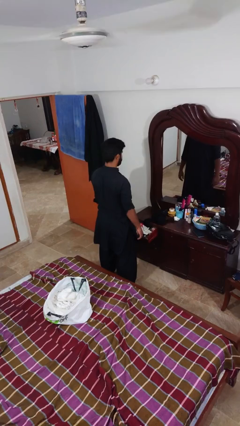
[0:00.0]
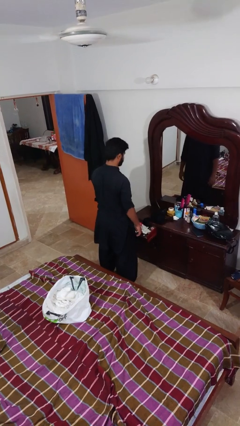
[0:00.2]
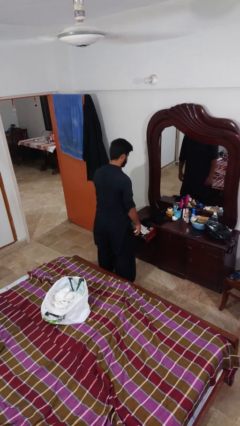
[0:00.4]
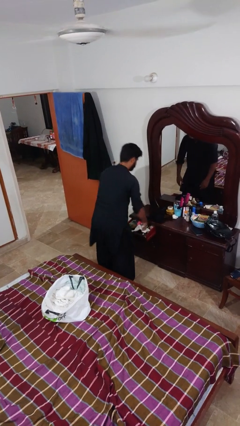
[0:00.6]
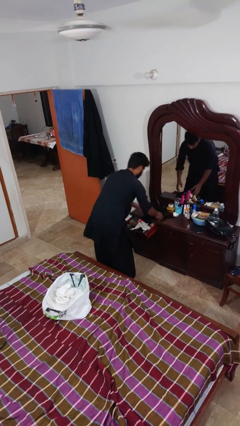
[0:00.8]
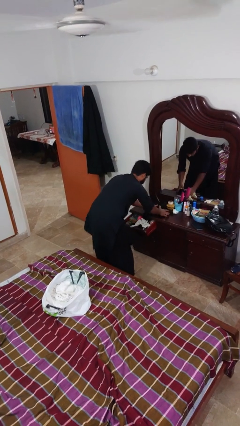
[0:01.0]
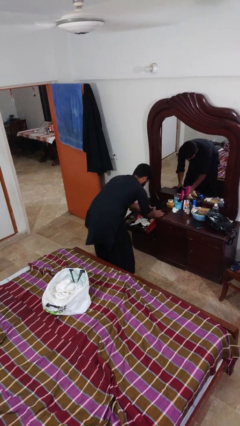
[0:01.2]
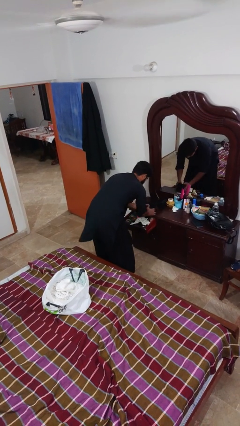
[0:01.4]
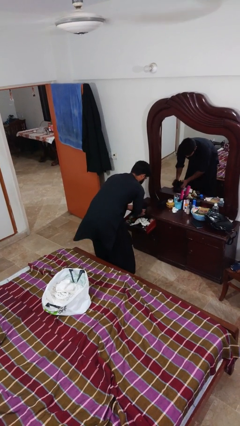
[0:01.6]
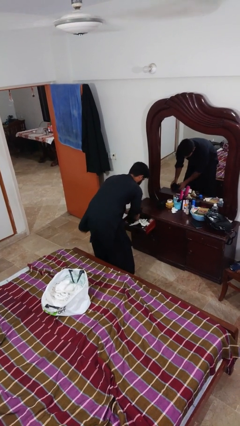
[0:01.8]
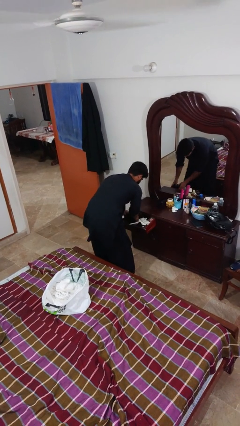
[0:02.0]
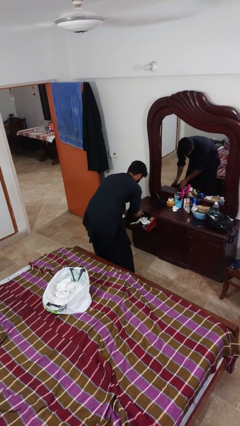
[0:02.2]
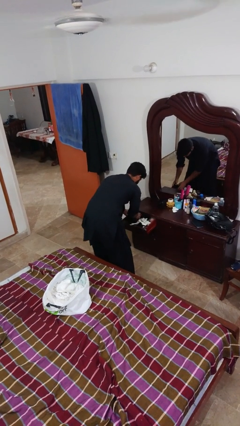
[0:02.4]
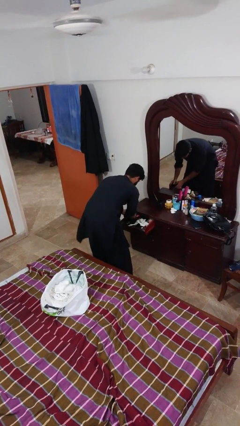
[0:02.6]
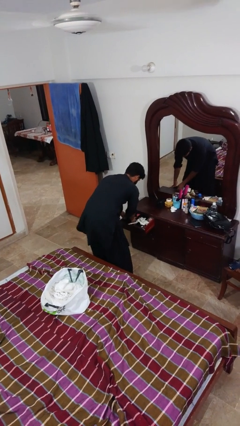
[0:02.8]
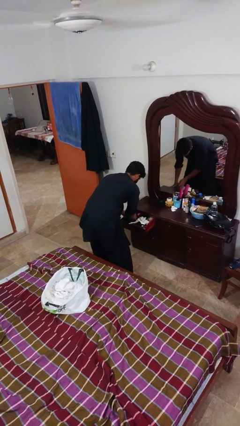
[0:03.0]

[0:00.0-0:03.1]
person puts clothes into dresser

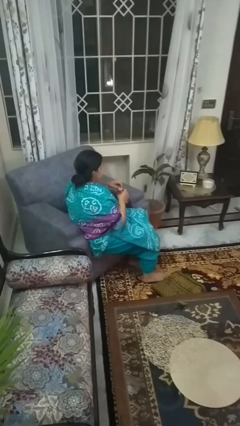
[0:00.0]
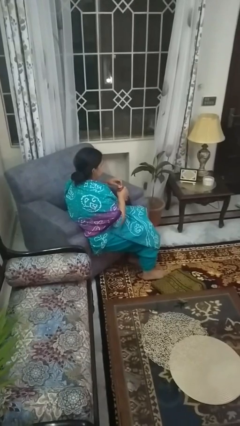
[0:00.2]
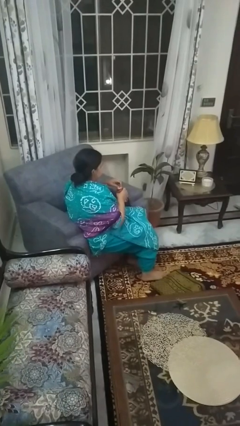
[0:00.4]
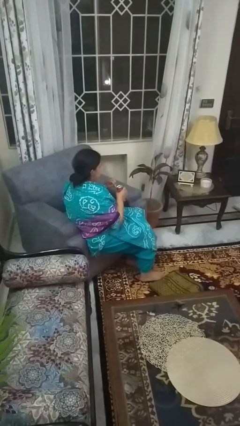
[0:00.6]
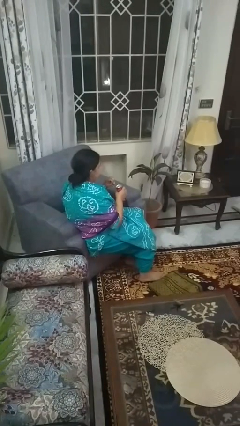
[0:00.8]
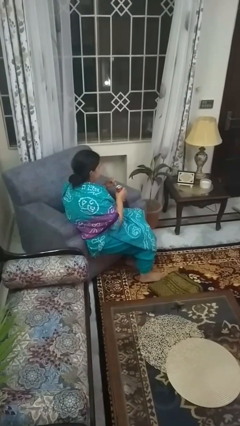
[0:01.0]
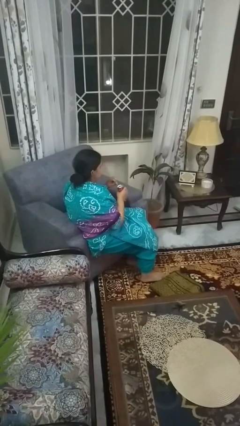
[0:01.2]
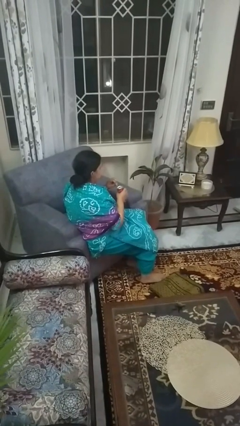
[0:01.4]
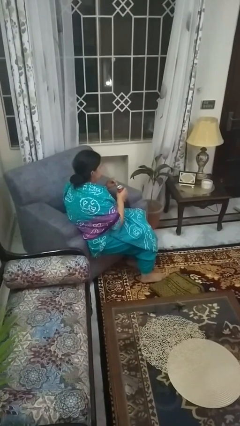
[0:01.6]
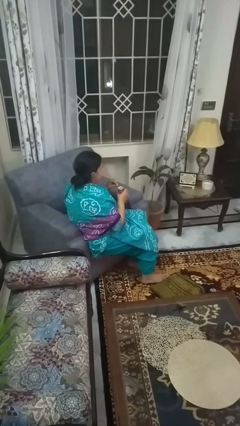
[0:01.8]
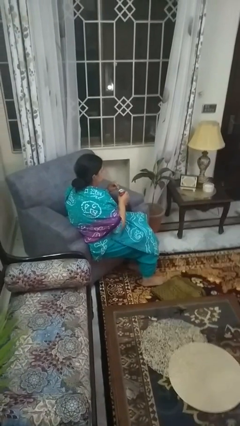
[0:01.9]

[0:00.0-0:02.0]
person opens beverage can

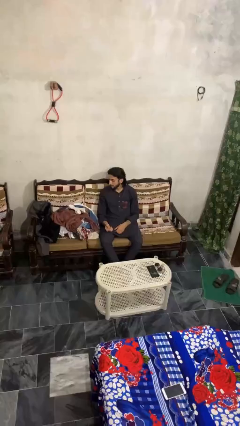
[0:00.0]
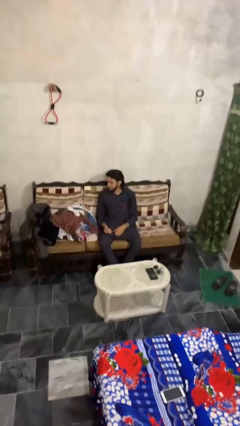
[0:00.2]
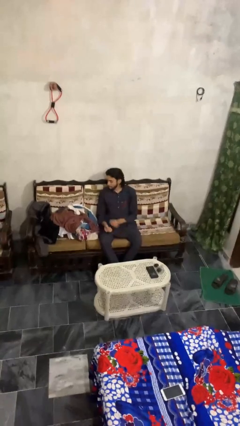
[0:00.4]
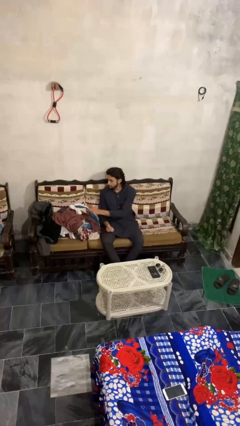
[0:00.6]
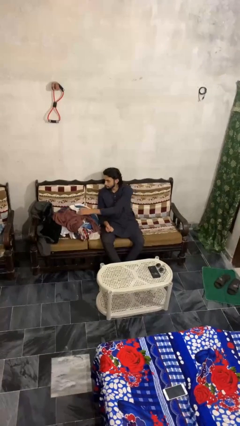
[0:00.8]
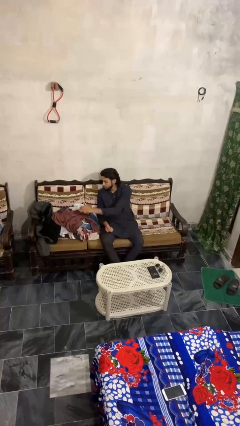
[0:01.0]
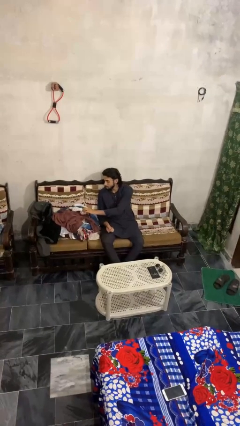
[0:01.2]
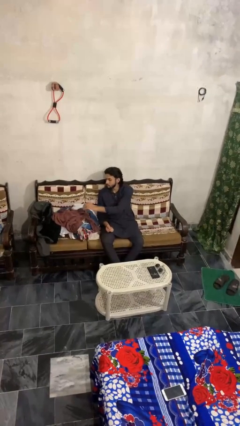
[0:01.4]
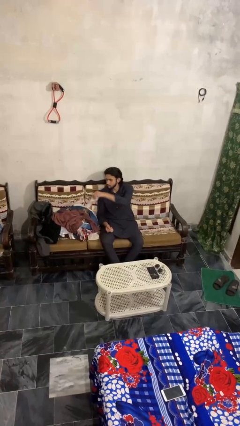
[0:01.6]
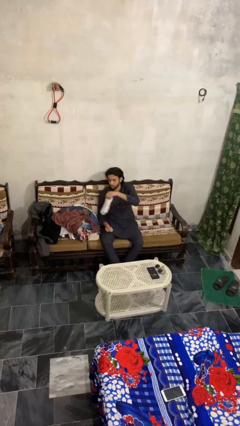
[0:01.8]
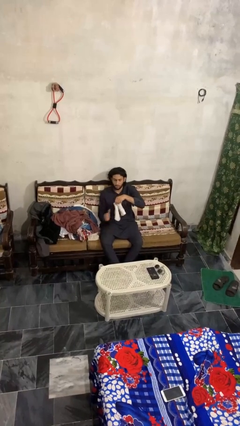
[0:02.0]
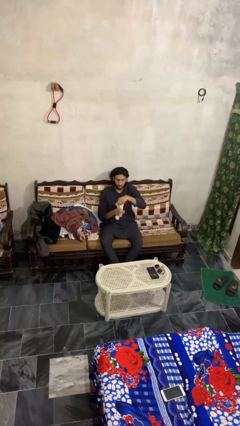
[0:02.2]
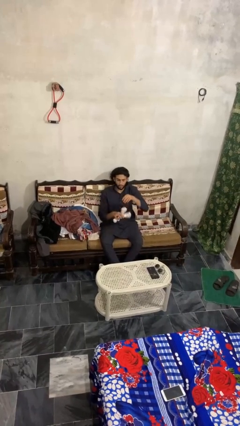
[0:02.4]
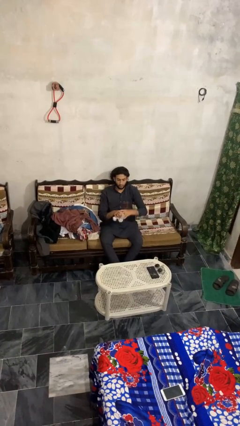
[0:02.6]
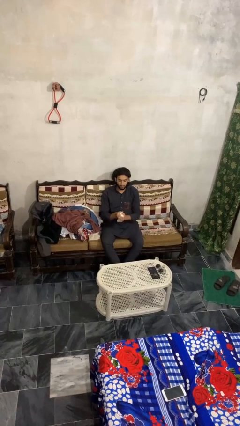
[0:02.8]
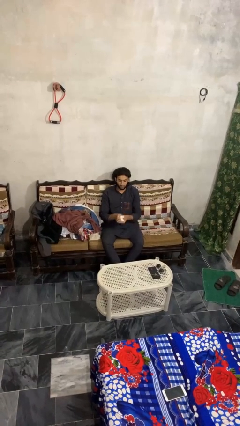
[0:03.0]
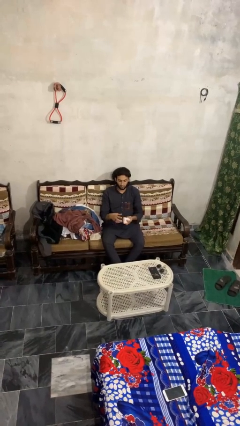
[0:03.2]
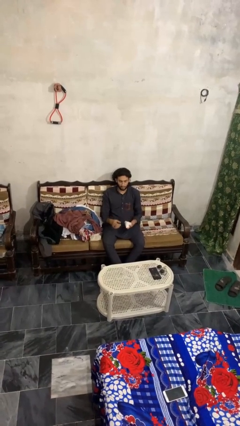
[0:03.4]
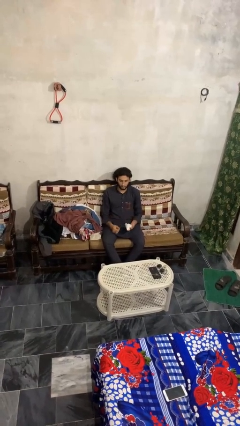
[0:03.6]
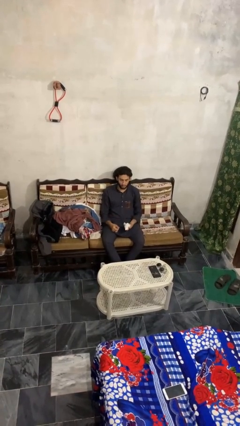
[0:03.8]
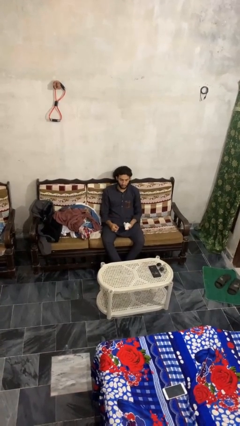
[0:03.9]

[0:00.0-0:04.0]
person folds socks

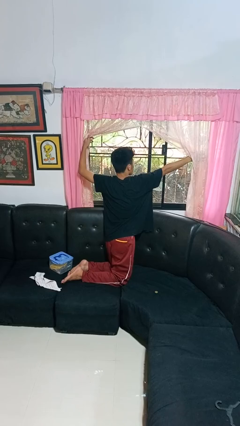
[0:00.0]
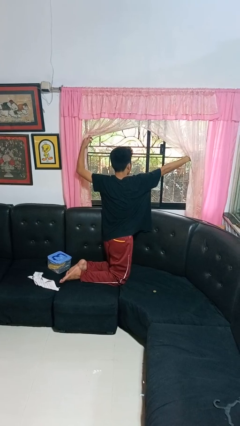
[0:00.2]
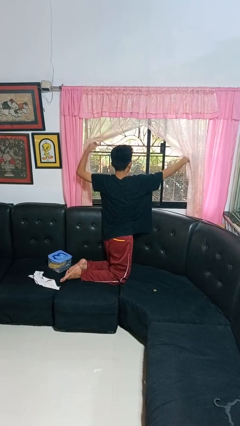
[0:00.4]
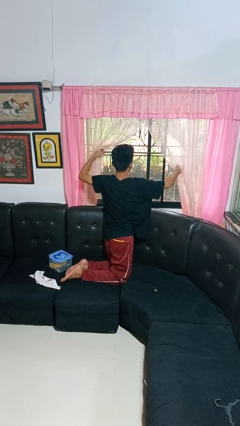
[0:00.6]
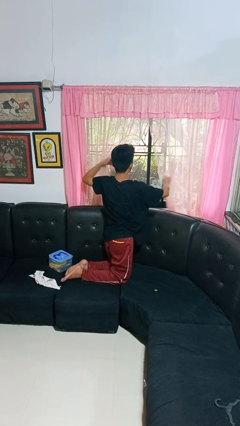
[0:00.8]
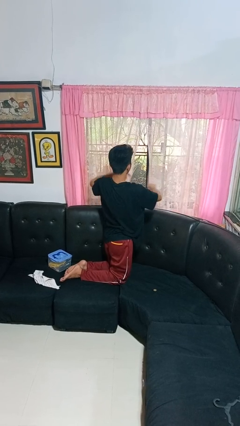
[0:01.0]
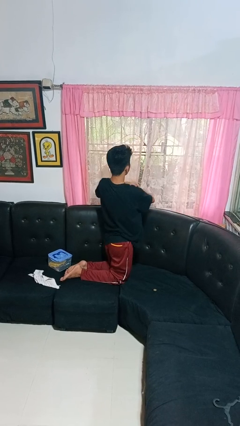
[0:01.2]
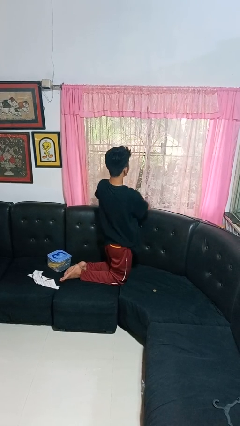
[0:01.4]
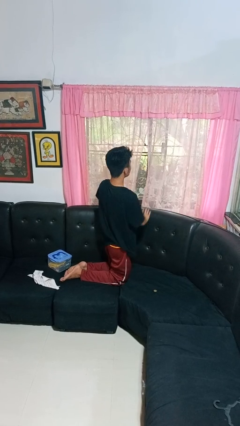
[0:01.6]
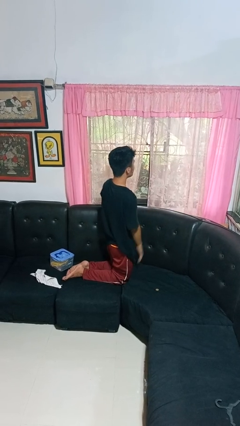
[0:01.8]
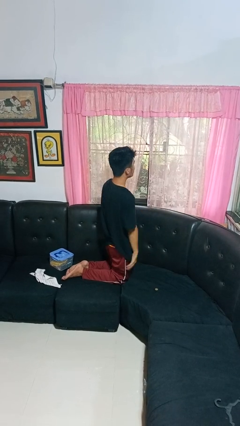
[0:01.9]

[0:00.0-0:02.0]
person closes curtains

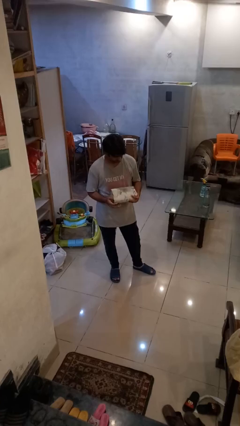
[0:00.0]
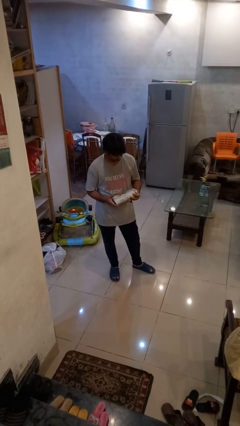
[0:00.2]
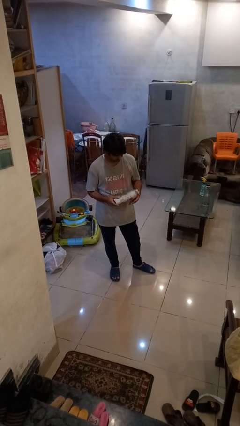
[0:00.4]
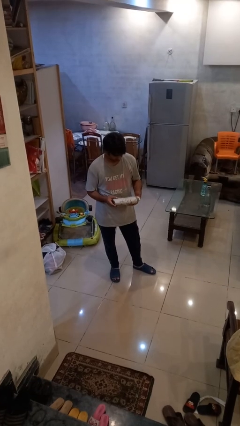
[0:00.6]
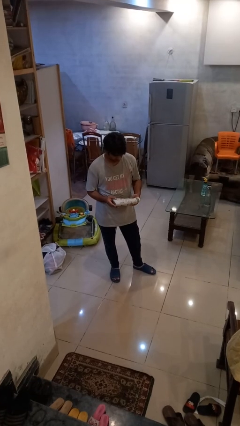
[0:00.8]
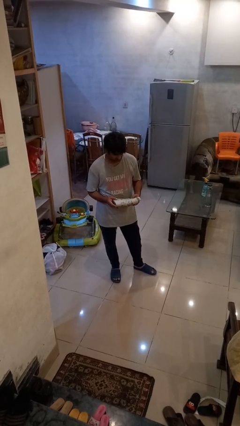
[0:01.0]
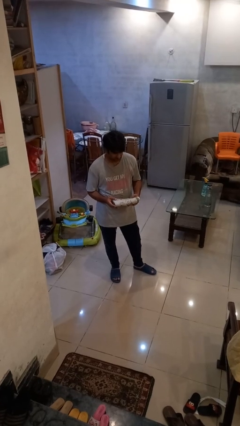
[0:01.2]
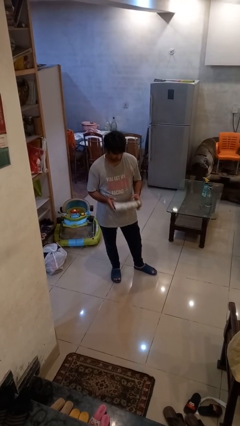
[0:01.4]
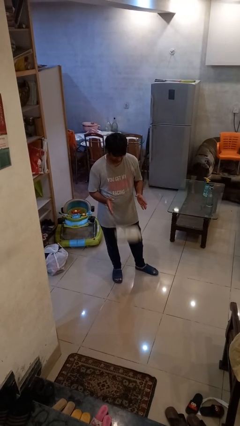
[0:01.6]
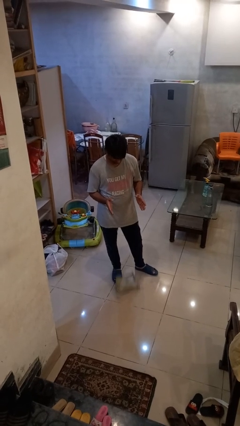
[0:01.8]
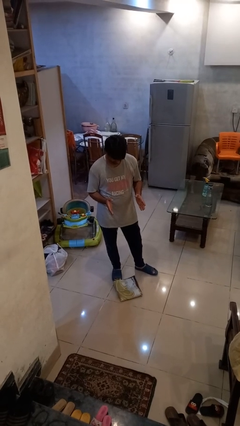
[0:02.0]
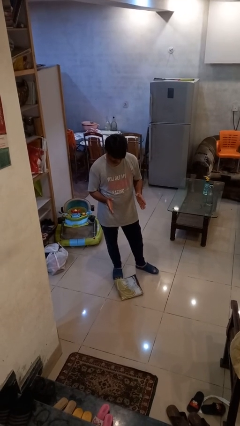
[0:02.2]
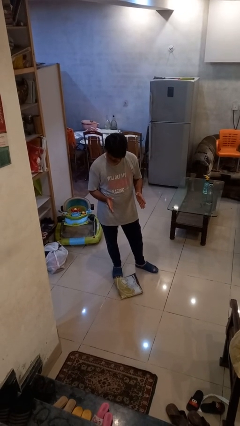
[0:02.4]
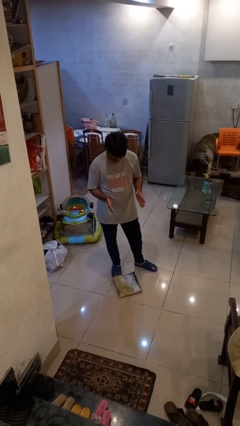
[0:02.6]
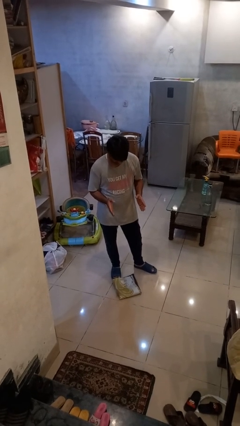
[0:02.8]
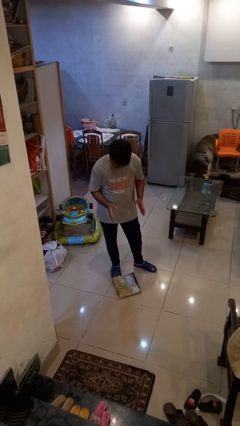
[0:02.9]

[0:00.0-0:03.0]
person drops object

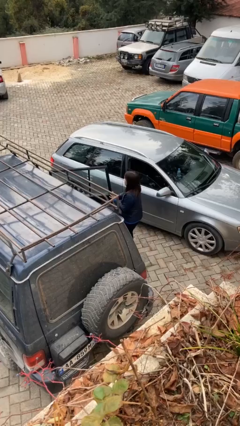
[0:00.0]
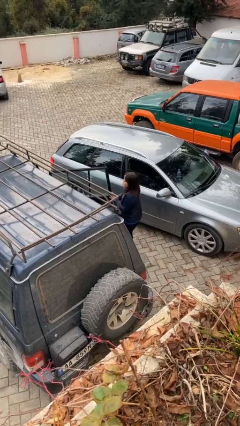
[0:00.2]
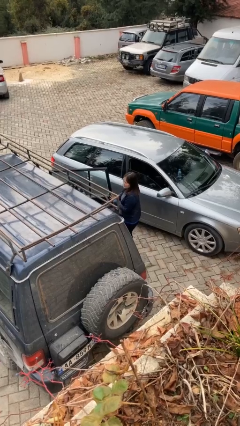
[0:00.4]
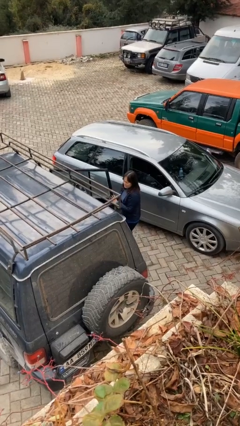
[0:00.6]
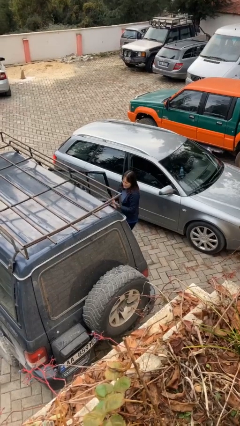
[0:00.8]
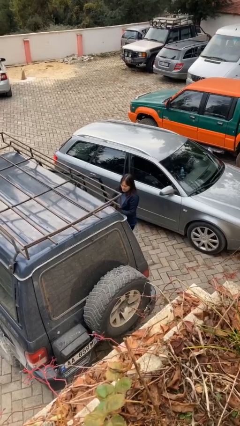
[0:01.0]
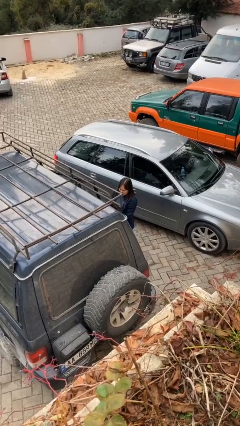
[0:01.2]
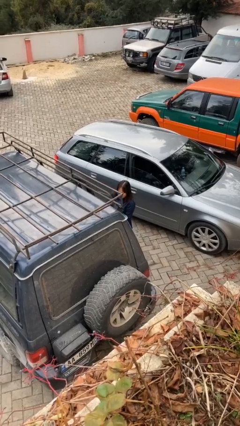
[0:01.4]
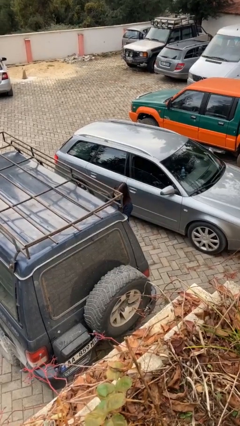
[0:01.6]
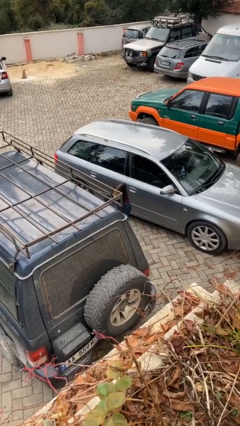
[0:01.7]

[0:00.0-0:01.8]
person closes car door

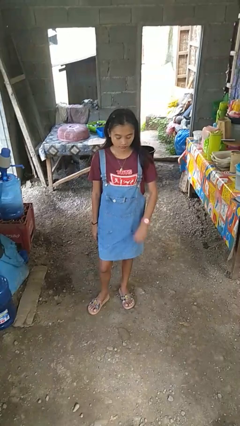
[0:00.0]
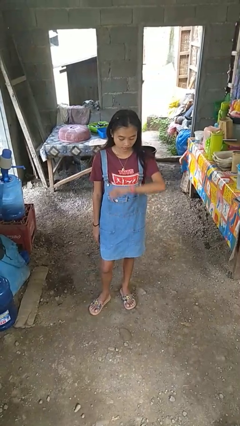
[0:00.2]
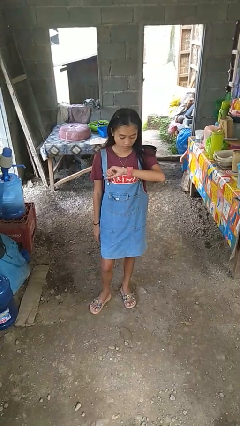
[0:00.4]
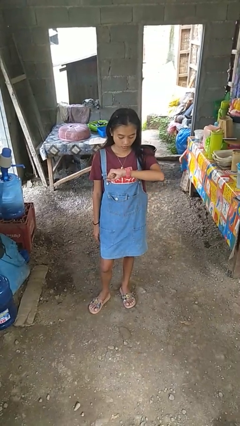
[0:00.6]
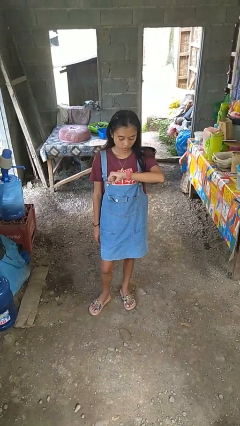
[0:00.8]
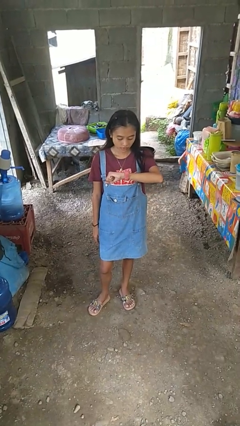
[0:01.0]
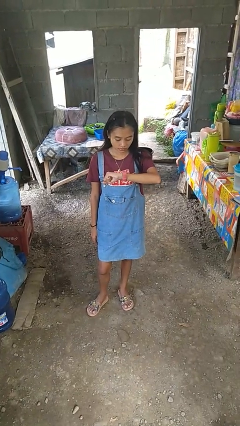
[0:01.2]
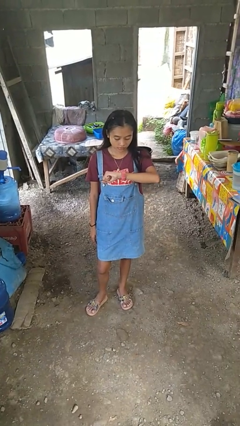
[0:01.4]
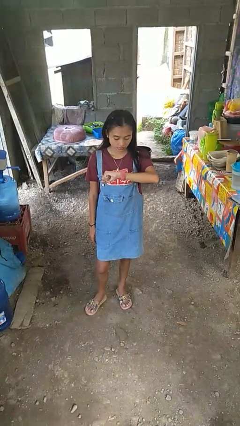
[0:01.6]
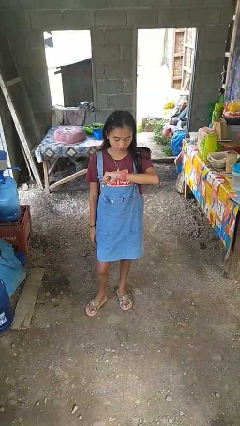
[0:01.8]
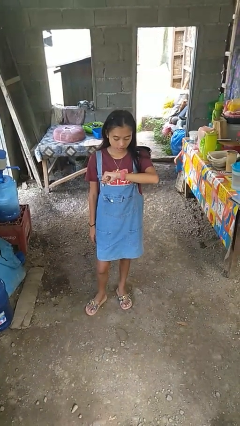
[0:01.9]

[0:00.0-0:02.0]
person looks at wristwatch
